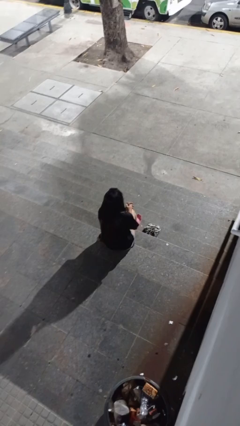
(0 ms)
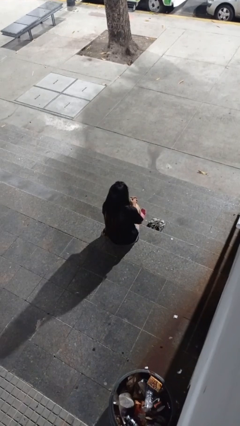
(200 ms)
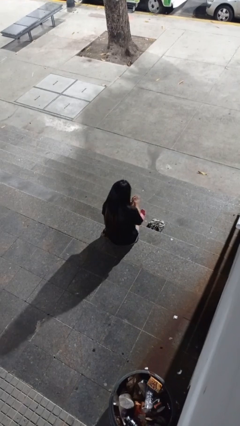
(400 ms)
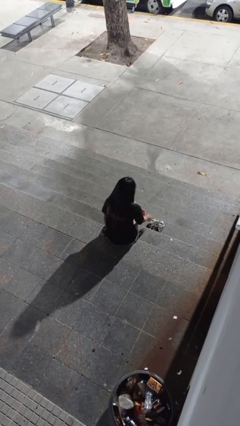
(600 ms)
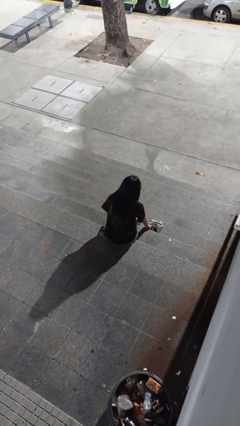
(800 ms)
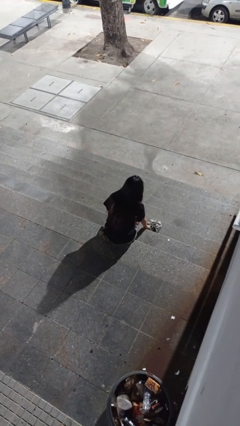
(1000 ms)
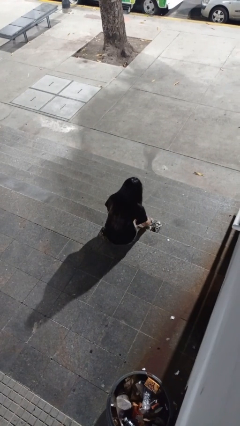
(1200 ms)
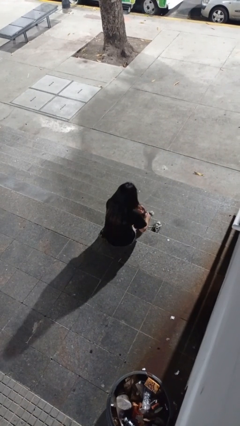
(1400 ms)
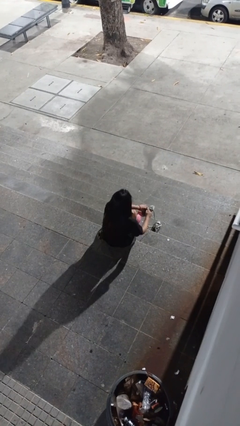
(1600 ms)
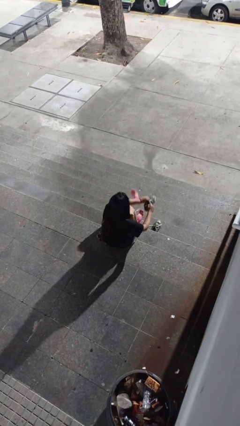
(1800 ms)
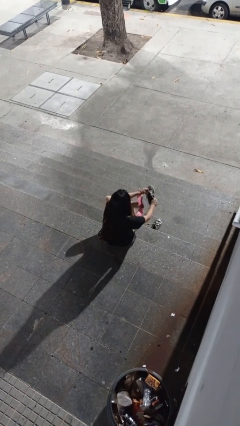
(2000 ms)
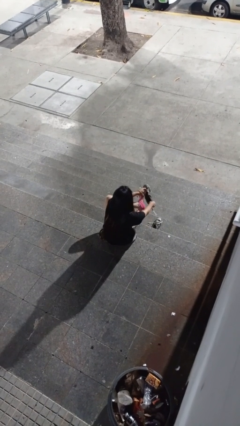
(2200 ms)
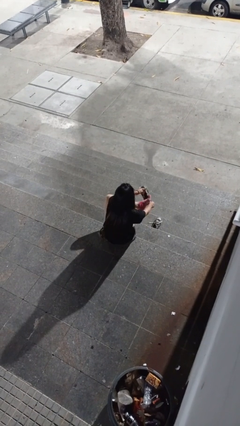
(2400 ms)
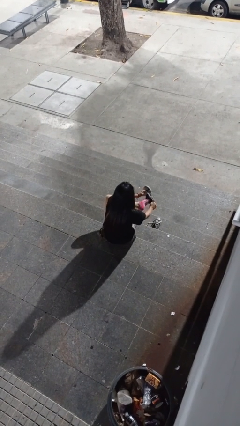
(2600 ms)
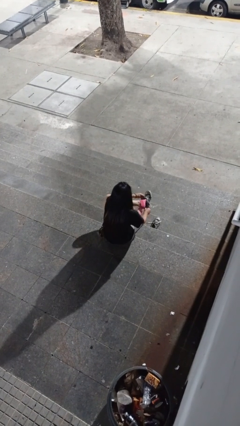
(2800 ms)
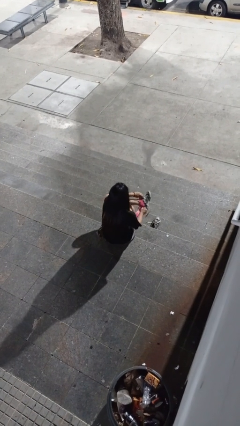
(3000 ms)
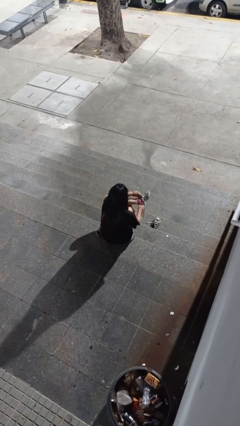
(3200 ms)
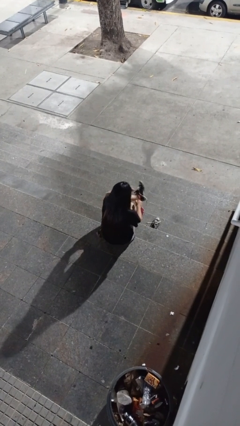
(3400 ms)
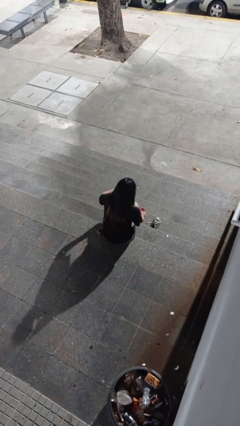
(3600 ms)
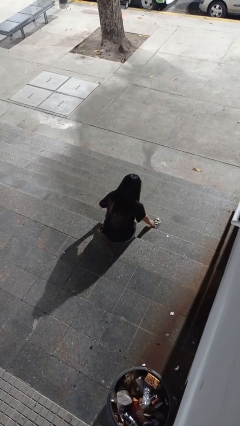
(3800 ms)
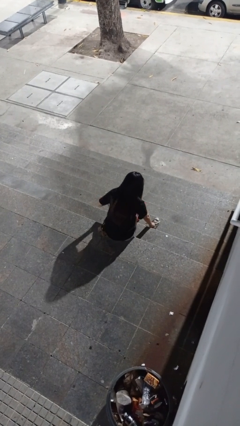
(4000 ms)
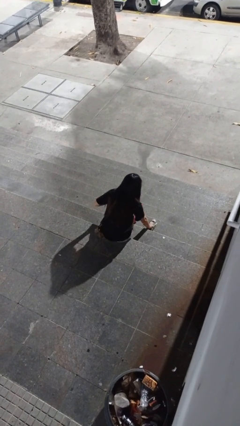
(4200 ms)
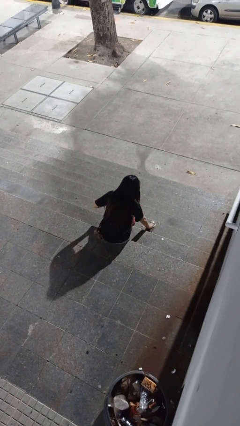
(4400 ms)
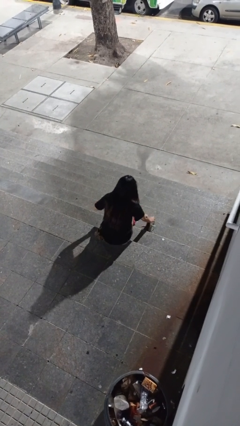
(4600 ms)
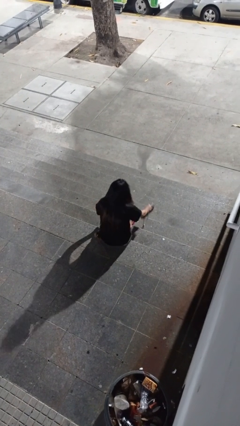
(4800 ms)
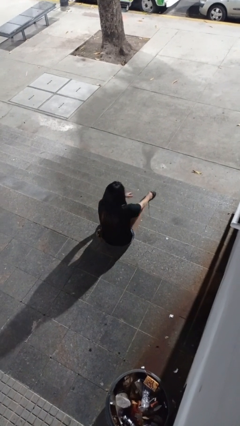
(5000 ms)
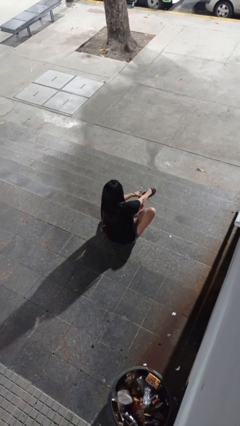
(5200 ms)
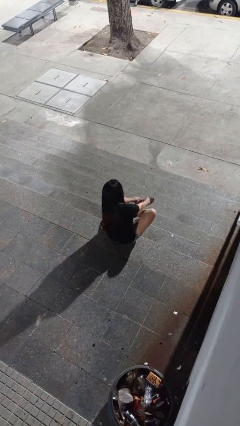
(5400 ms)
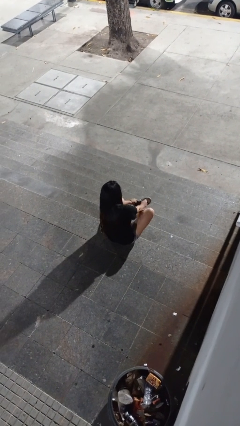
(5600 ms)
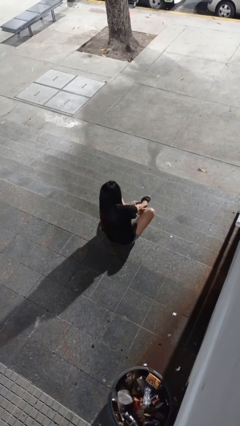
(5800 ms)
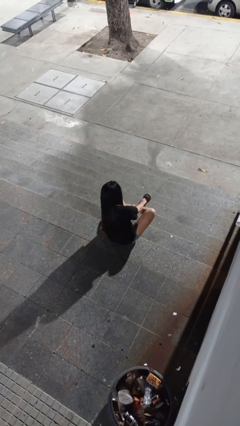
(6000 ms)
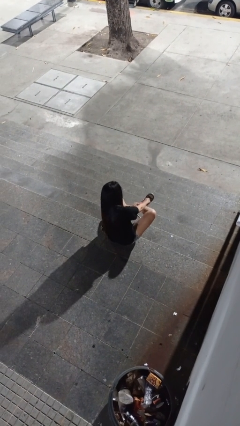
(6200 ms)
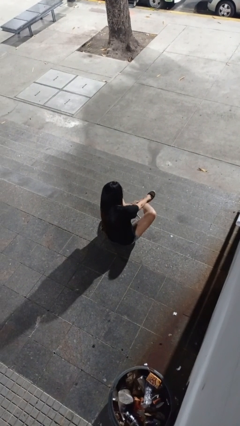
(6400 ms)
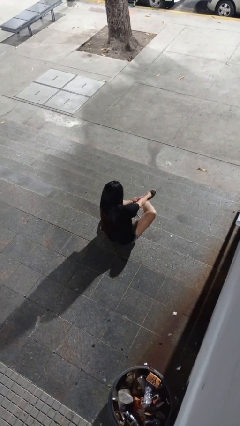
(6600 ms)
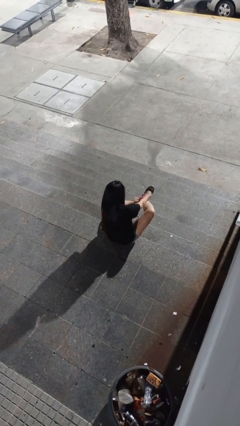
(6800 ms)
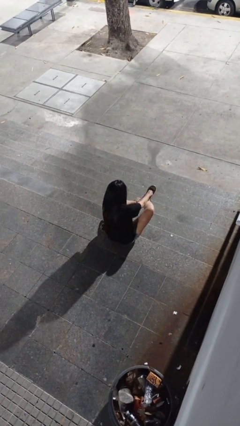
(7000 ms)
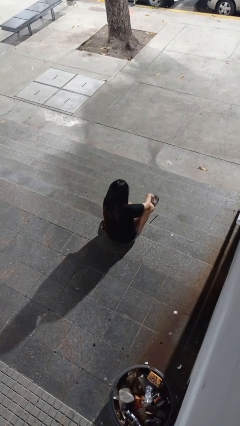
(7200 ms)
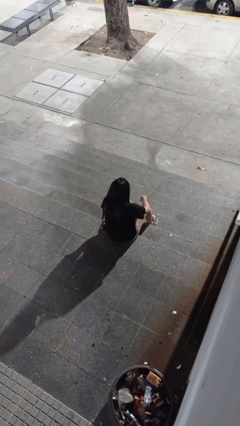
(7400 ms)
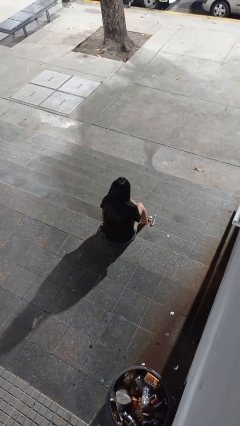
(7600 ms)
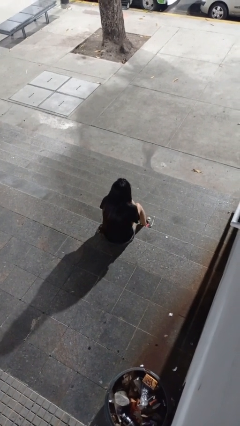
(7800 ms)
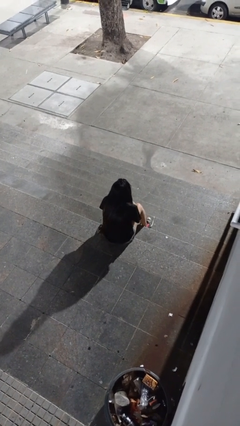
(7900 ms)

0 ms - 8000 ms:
person puts on shoes

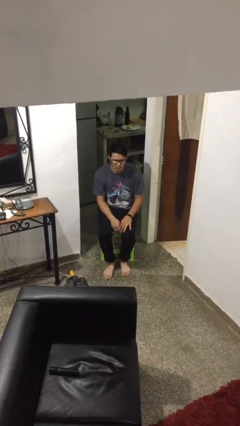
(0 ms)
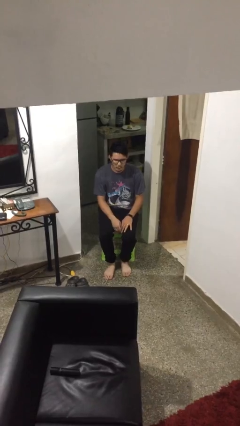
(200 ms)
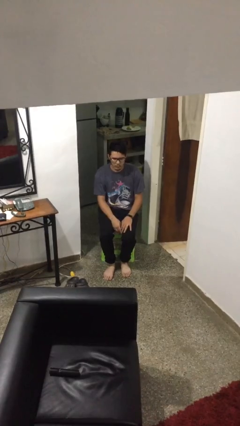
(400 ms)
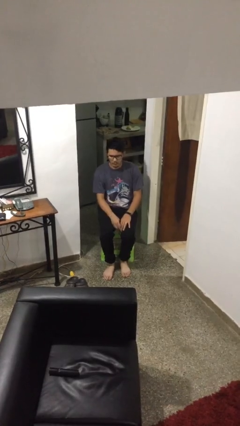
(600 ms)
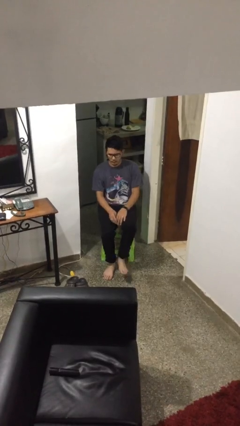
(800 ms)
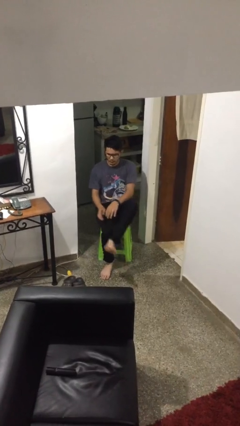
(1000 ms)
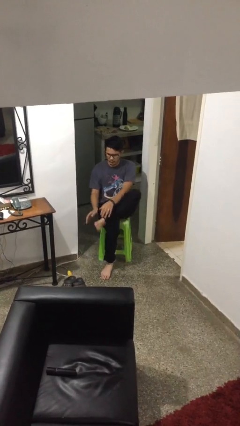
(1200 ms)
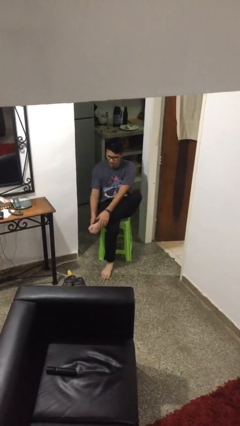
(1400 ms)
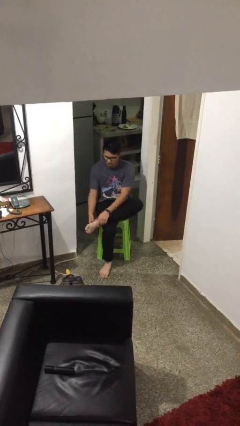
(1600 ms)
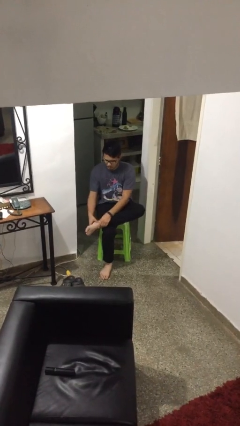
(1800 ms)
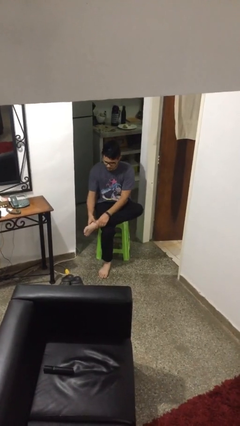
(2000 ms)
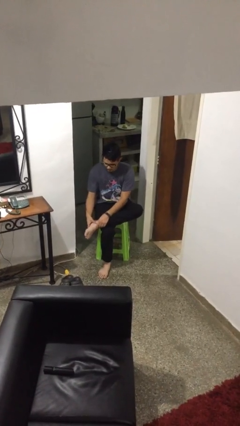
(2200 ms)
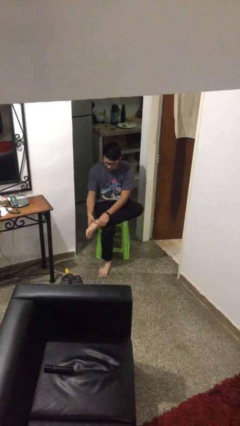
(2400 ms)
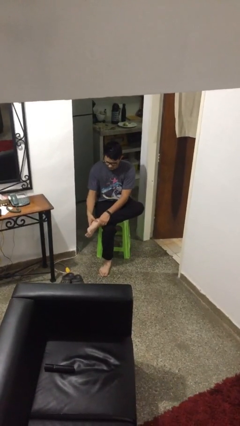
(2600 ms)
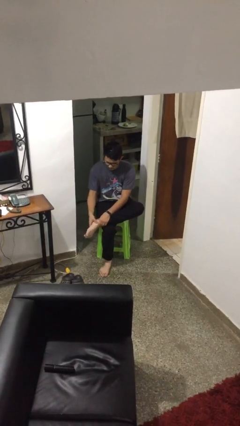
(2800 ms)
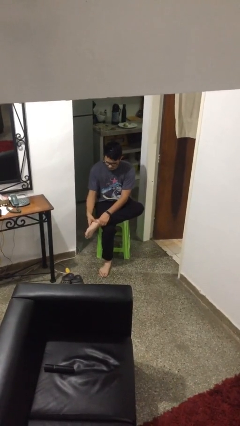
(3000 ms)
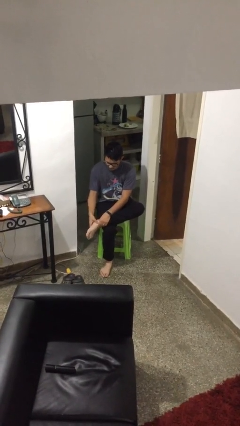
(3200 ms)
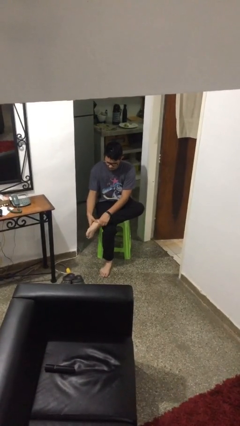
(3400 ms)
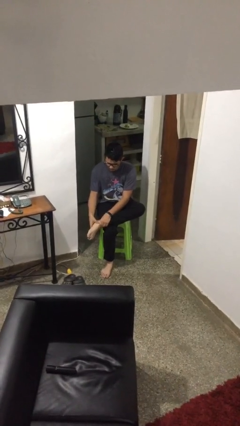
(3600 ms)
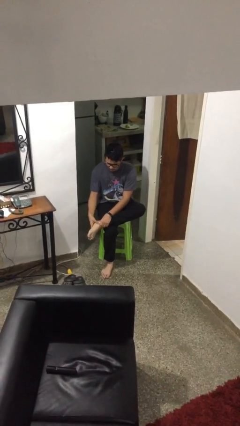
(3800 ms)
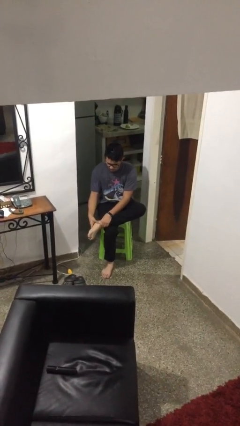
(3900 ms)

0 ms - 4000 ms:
person rubs foot

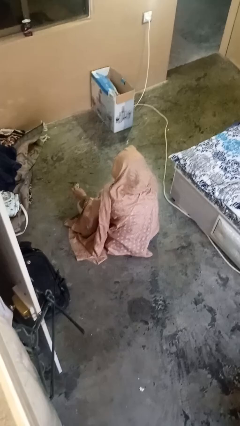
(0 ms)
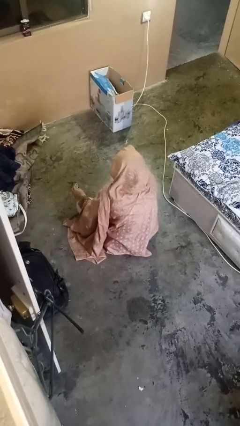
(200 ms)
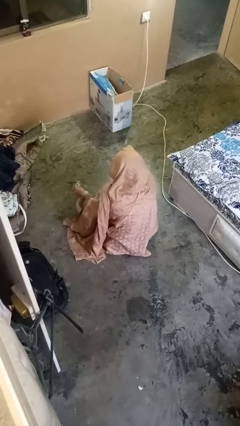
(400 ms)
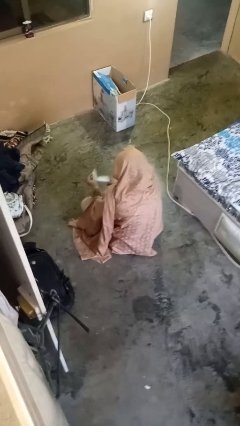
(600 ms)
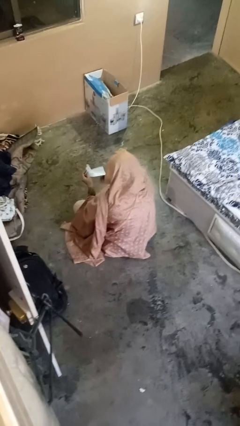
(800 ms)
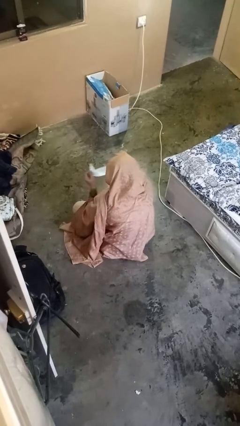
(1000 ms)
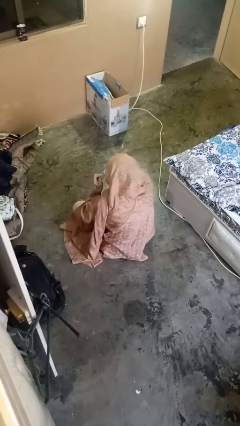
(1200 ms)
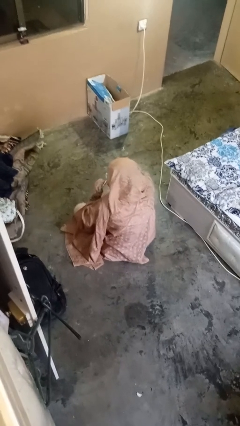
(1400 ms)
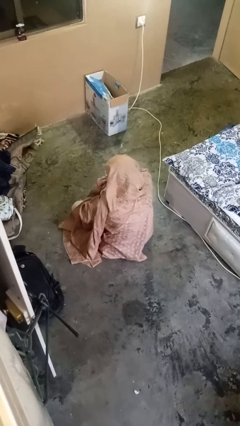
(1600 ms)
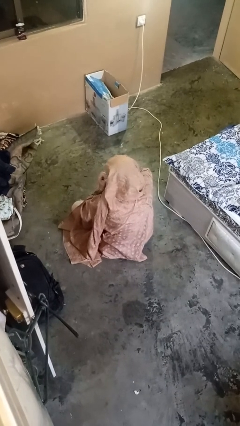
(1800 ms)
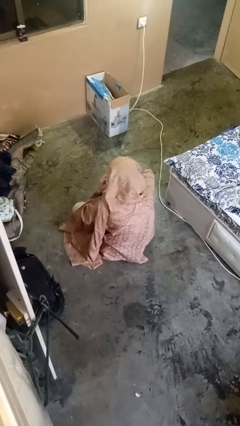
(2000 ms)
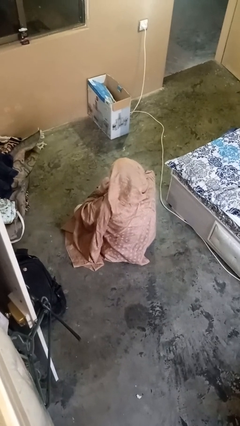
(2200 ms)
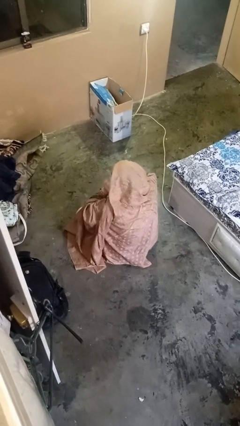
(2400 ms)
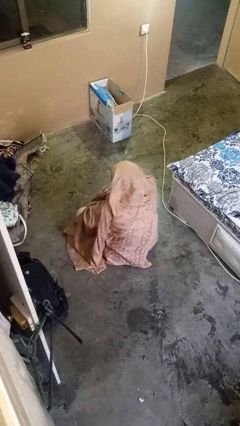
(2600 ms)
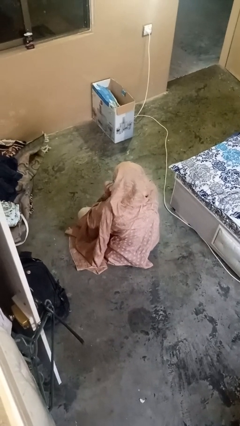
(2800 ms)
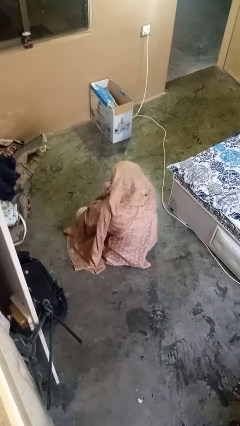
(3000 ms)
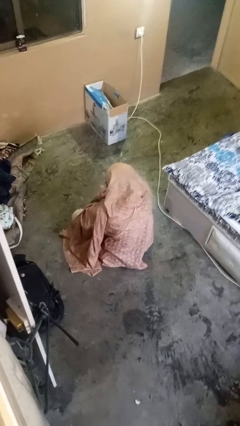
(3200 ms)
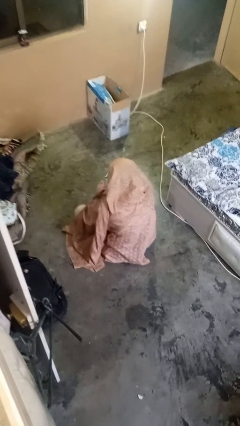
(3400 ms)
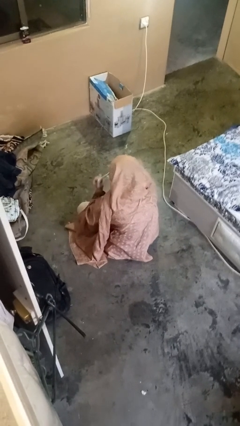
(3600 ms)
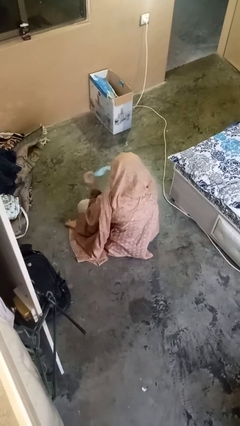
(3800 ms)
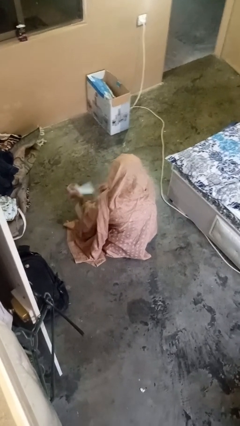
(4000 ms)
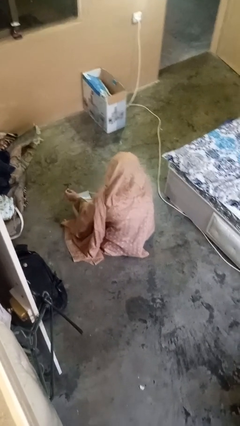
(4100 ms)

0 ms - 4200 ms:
person puts on facemask

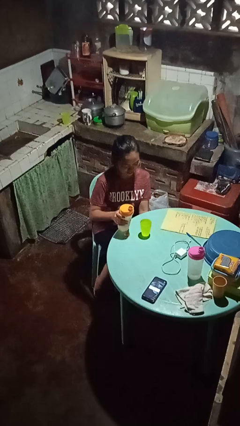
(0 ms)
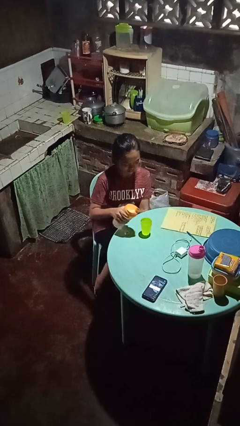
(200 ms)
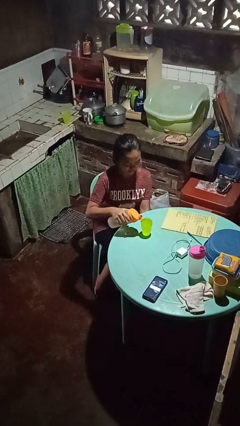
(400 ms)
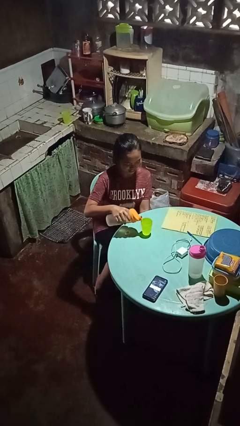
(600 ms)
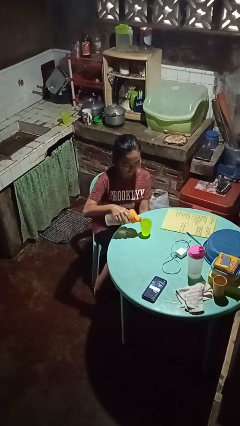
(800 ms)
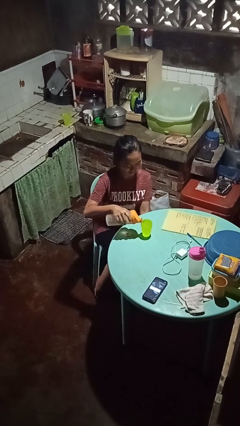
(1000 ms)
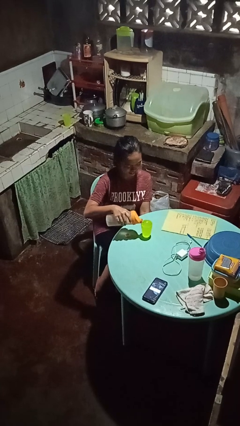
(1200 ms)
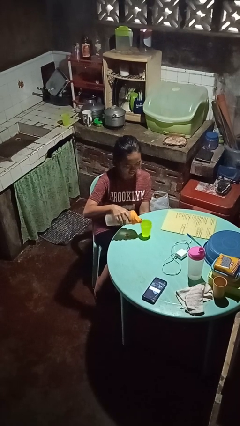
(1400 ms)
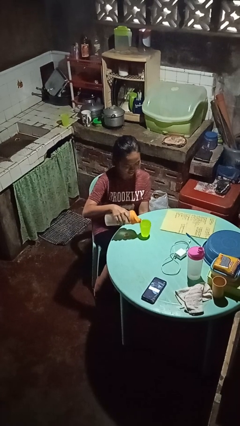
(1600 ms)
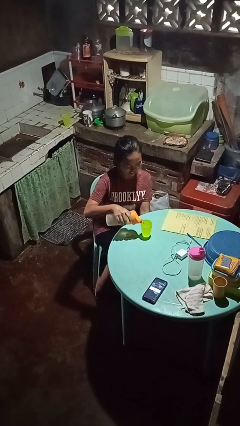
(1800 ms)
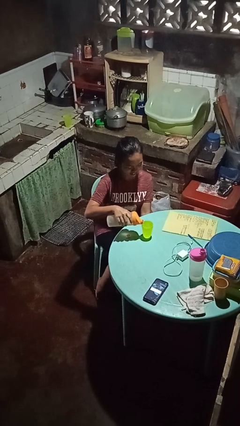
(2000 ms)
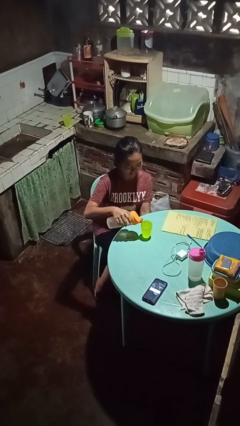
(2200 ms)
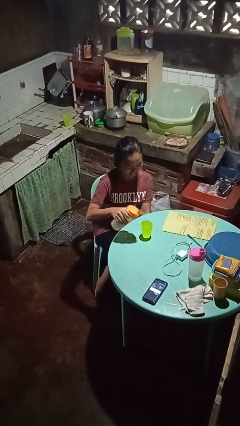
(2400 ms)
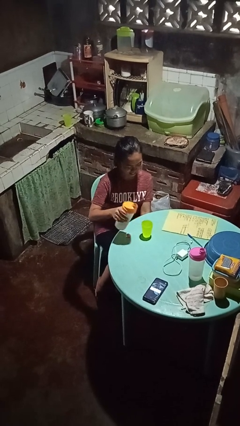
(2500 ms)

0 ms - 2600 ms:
person pours liquid into cup
